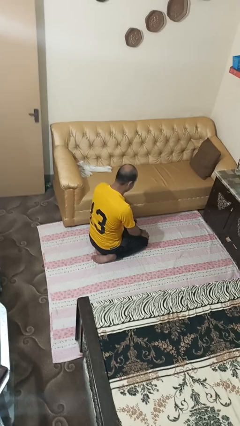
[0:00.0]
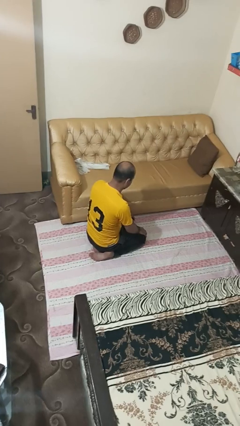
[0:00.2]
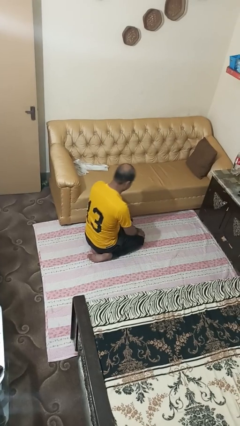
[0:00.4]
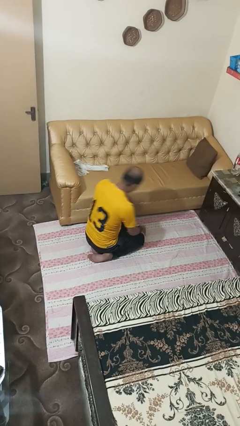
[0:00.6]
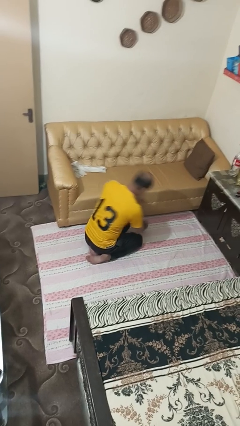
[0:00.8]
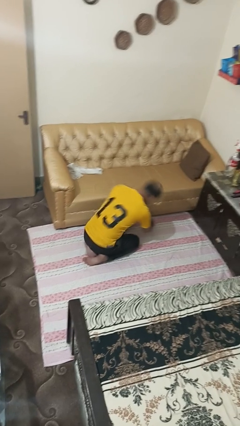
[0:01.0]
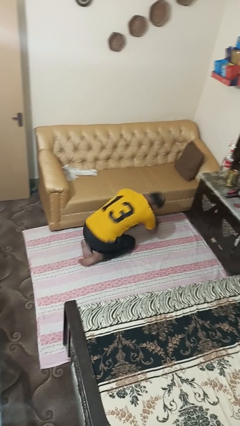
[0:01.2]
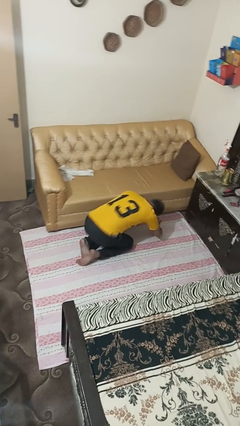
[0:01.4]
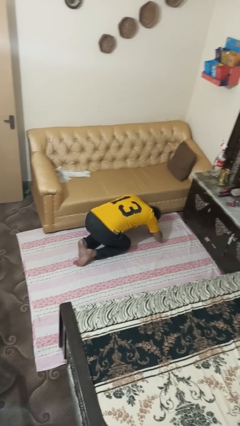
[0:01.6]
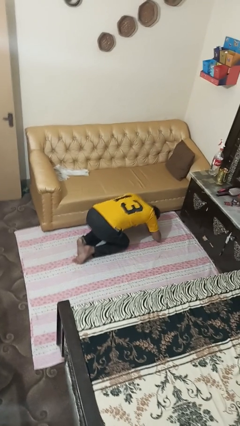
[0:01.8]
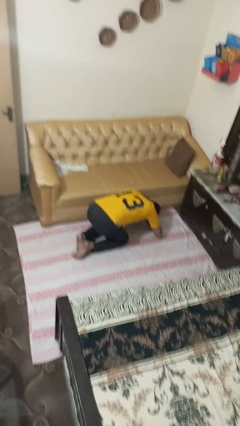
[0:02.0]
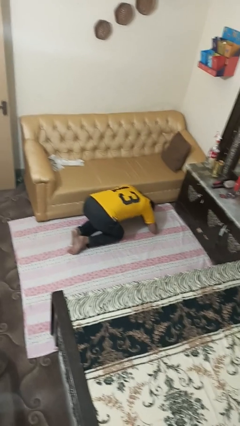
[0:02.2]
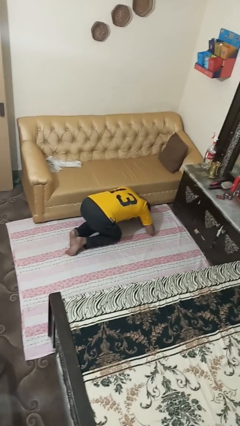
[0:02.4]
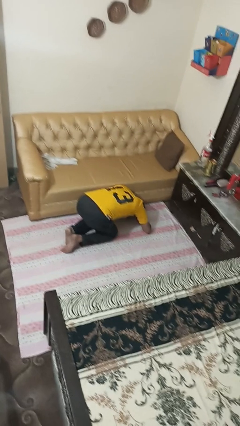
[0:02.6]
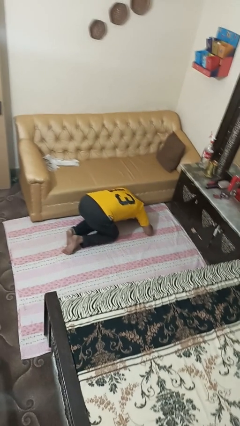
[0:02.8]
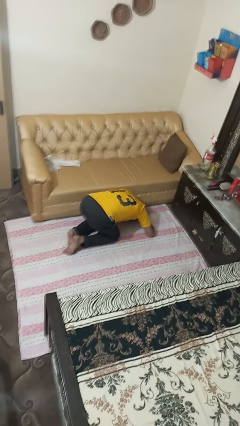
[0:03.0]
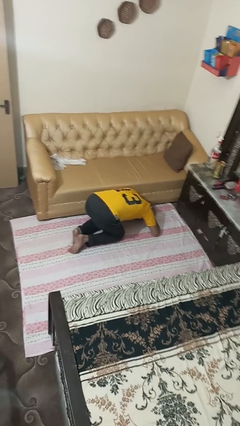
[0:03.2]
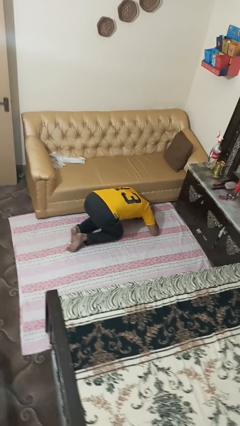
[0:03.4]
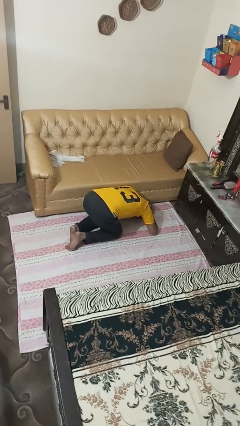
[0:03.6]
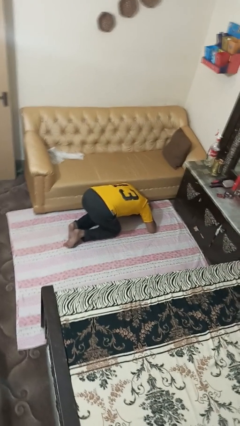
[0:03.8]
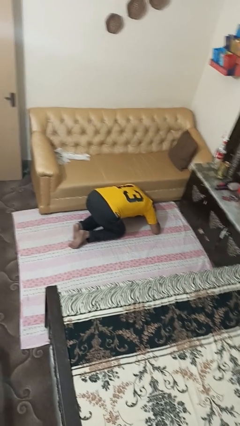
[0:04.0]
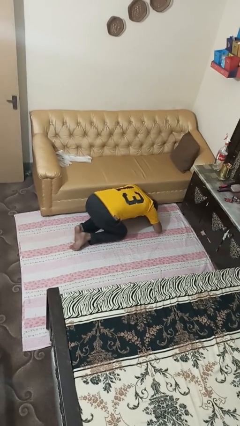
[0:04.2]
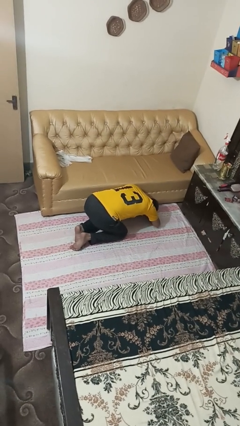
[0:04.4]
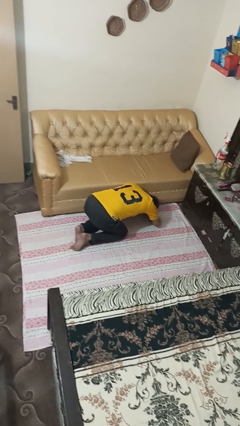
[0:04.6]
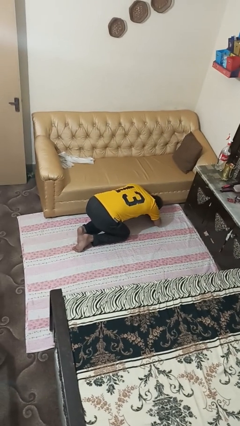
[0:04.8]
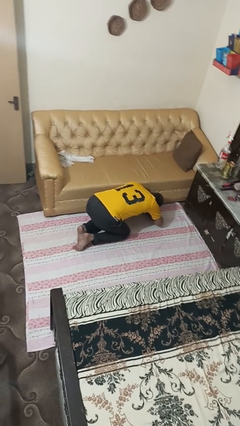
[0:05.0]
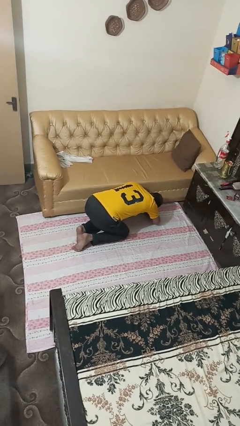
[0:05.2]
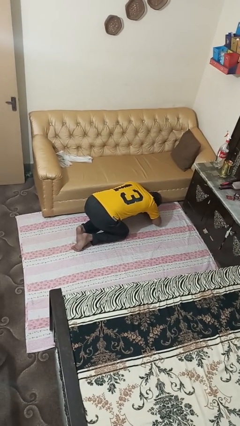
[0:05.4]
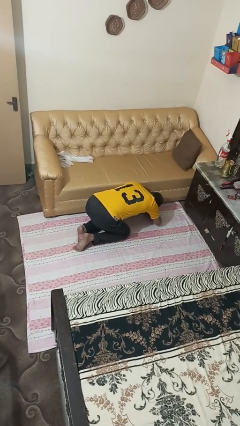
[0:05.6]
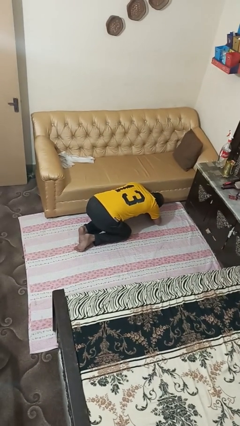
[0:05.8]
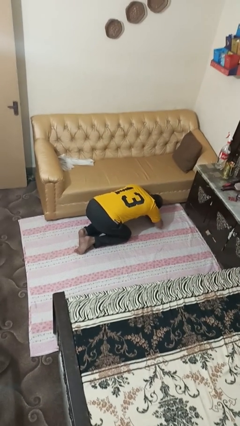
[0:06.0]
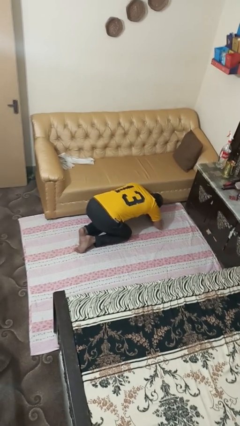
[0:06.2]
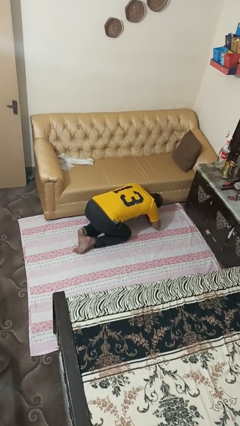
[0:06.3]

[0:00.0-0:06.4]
person searches under couch

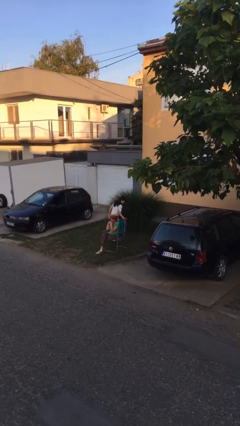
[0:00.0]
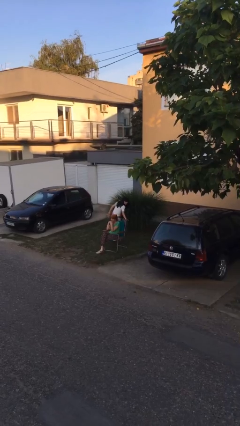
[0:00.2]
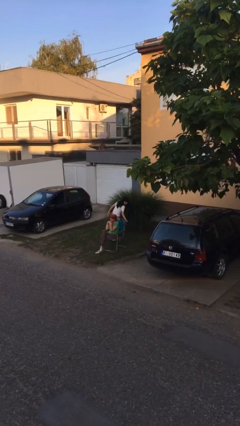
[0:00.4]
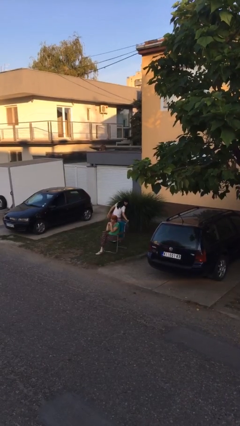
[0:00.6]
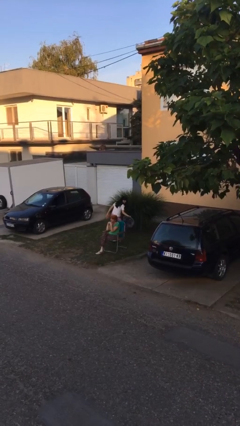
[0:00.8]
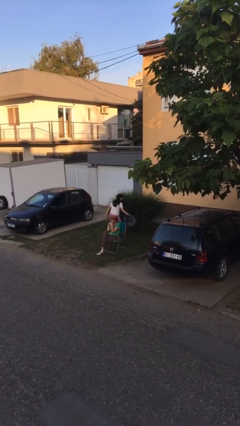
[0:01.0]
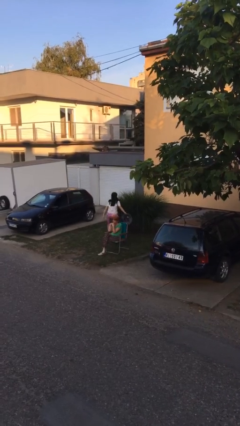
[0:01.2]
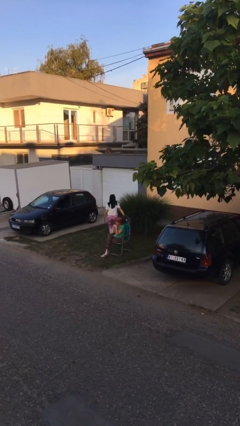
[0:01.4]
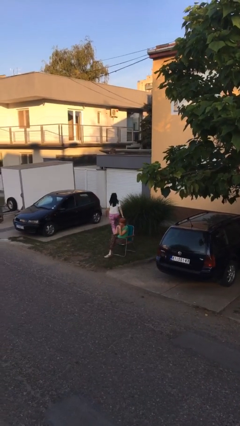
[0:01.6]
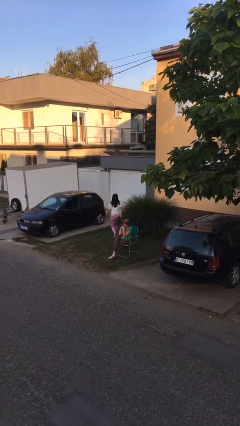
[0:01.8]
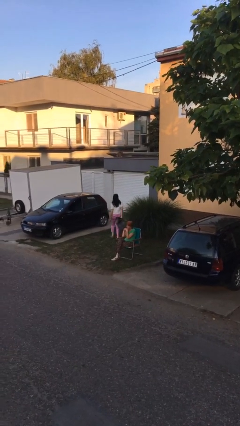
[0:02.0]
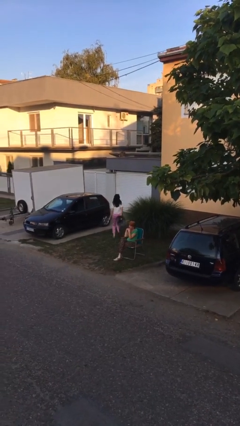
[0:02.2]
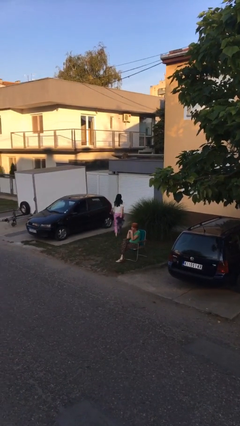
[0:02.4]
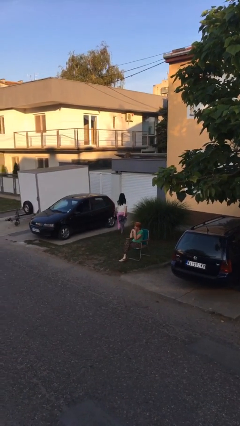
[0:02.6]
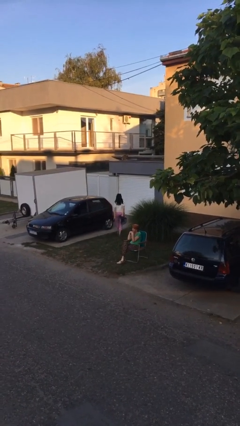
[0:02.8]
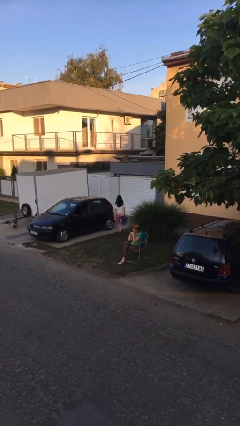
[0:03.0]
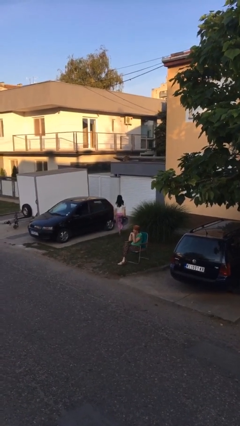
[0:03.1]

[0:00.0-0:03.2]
person steals object from person

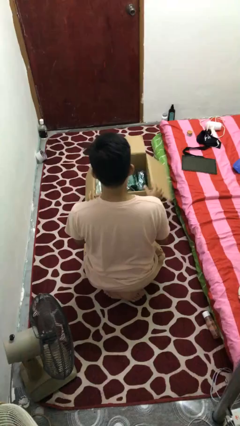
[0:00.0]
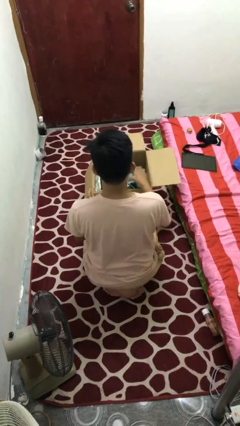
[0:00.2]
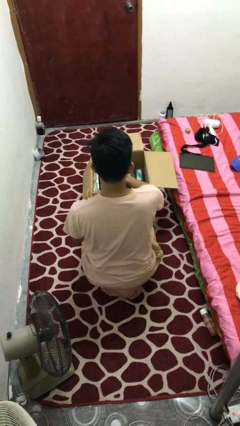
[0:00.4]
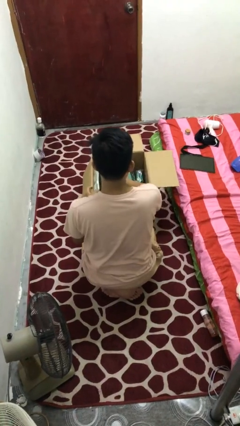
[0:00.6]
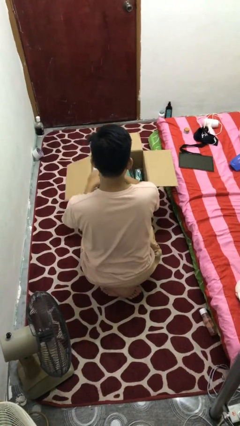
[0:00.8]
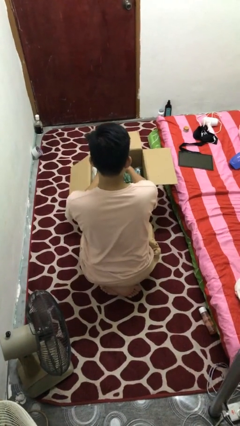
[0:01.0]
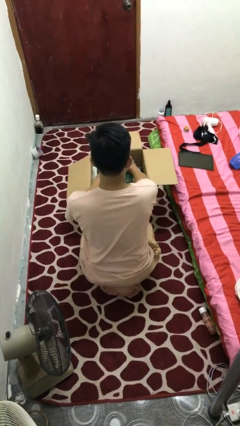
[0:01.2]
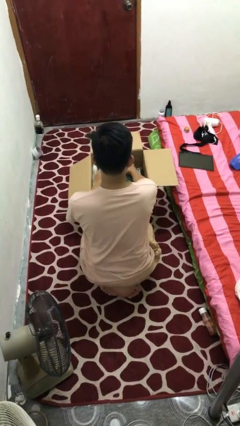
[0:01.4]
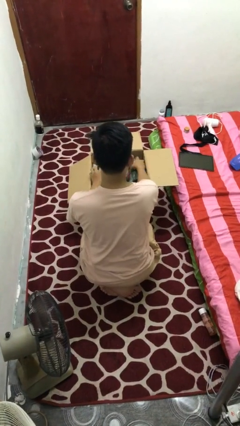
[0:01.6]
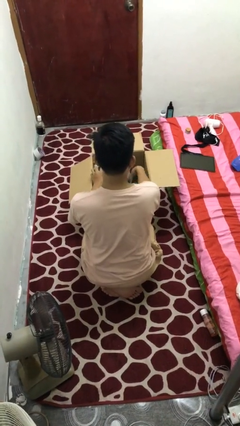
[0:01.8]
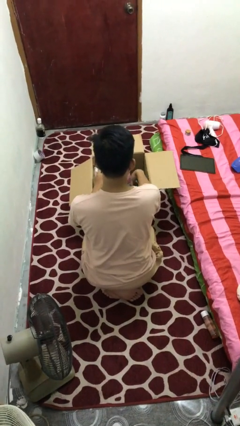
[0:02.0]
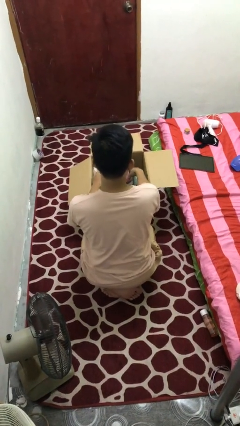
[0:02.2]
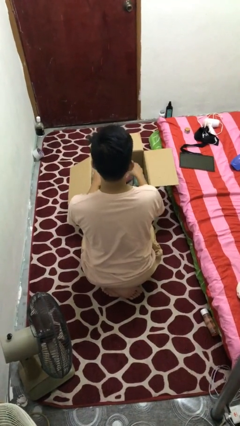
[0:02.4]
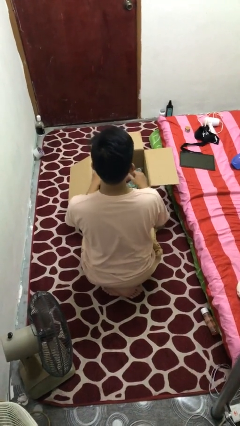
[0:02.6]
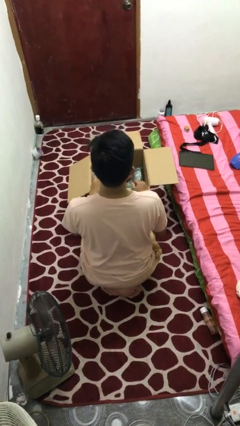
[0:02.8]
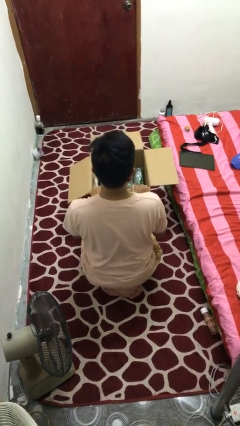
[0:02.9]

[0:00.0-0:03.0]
person searches in box

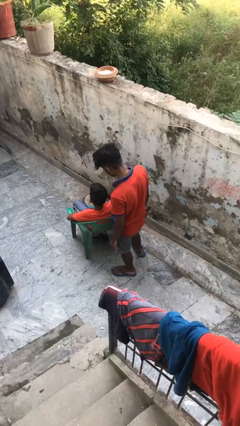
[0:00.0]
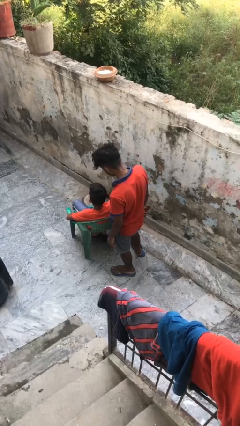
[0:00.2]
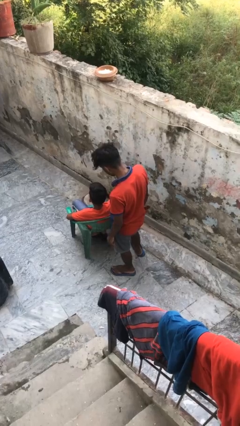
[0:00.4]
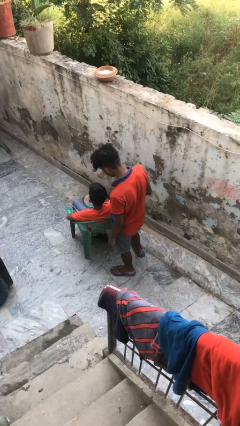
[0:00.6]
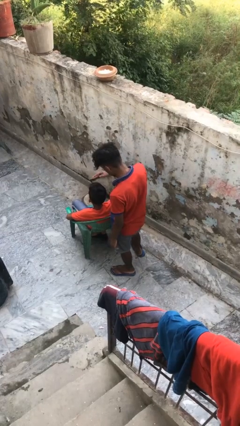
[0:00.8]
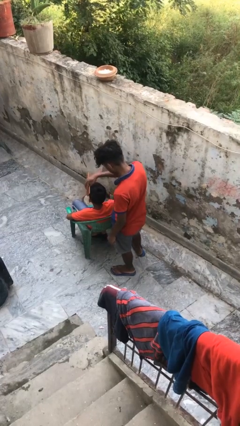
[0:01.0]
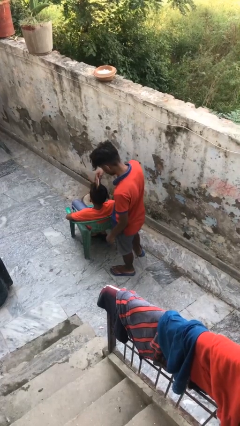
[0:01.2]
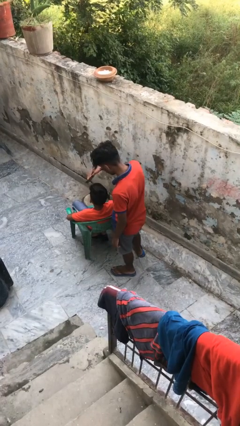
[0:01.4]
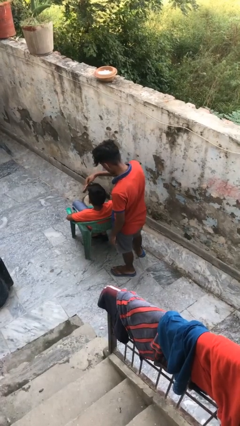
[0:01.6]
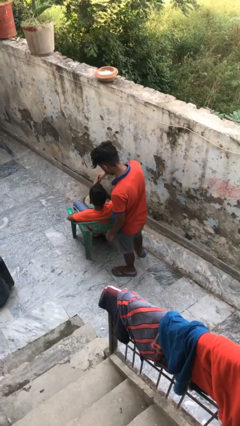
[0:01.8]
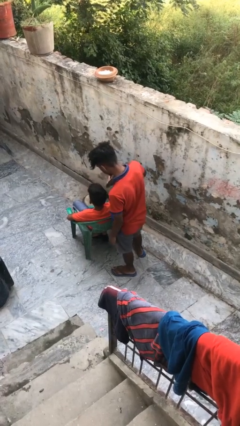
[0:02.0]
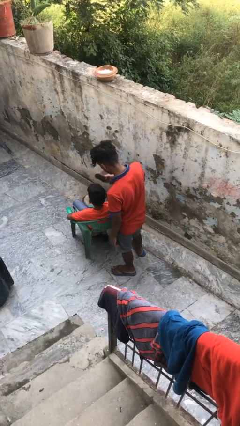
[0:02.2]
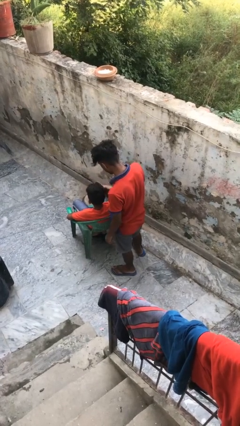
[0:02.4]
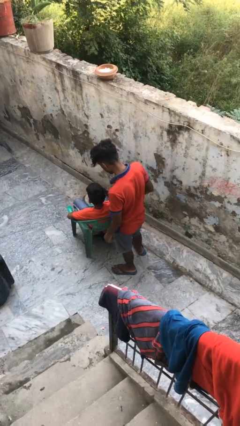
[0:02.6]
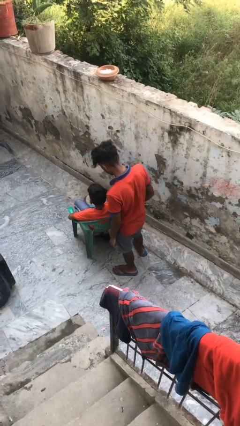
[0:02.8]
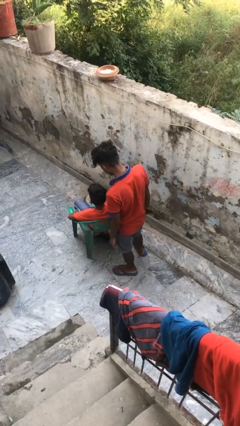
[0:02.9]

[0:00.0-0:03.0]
person brushes hair of person

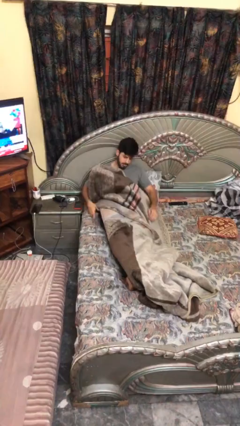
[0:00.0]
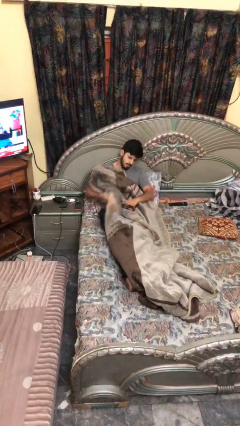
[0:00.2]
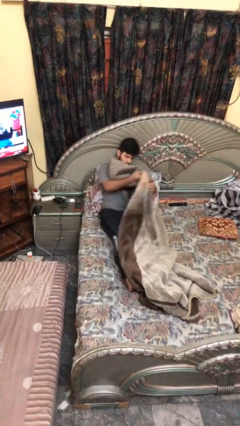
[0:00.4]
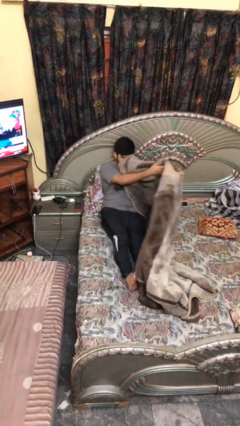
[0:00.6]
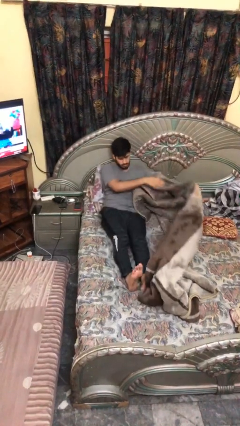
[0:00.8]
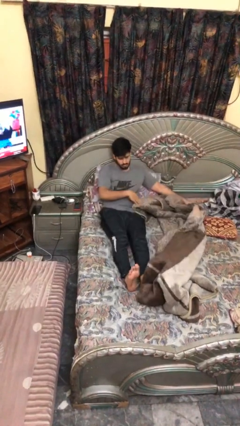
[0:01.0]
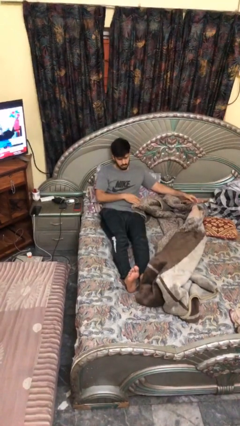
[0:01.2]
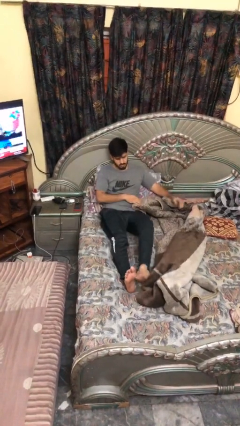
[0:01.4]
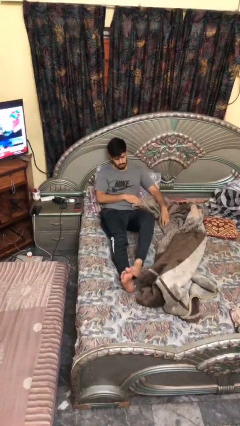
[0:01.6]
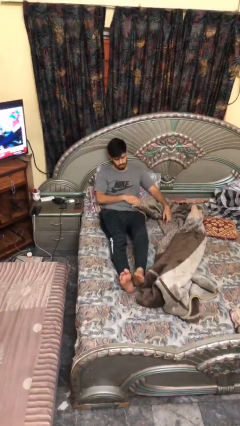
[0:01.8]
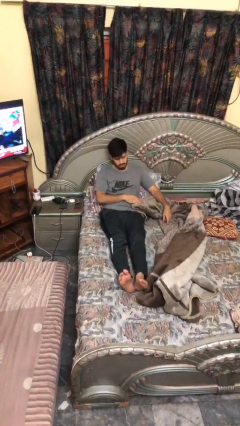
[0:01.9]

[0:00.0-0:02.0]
person uncovers with blanket
